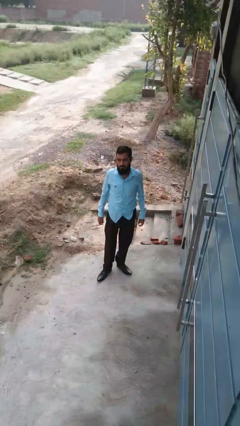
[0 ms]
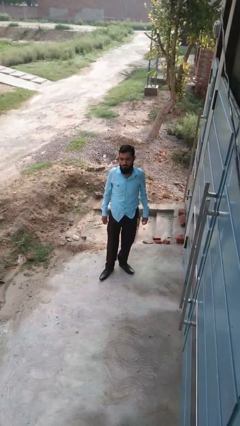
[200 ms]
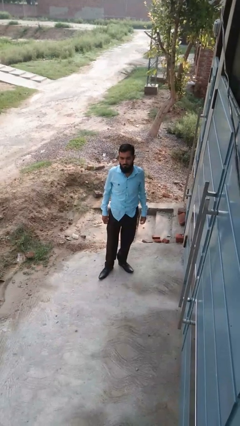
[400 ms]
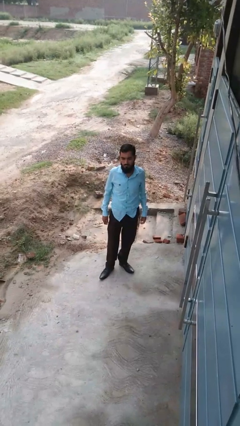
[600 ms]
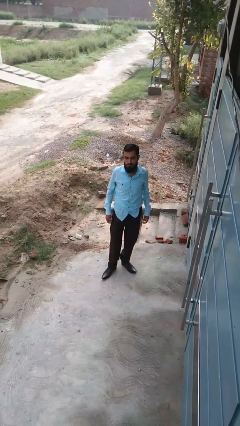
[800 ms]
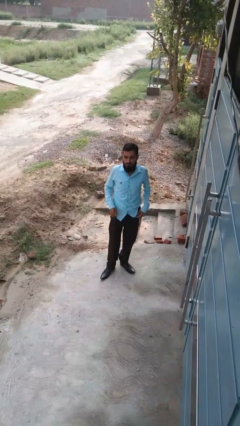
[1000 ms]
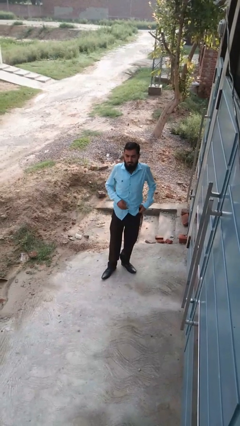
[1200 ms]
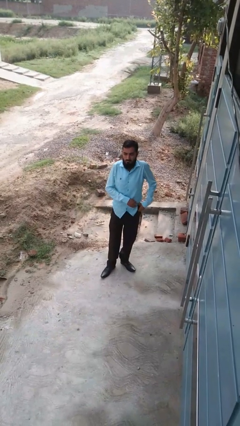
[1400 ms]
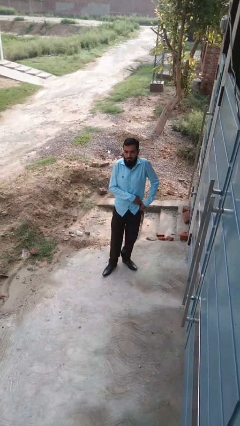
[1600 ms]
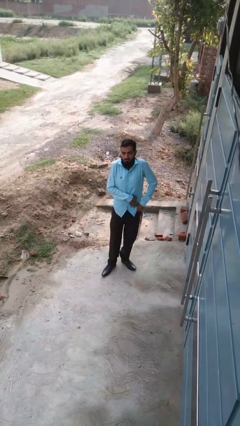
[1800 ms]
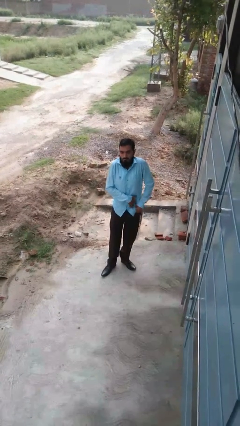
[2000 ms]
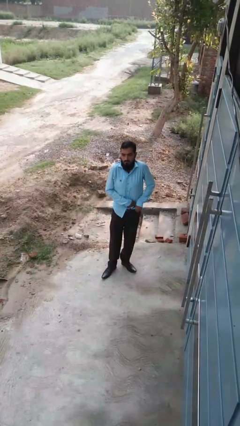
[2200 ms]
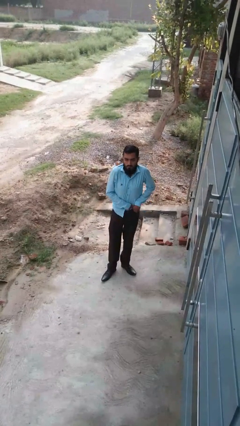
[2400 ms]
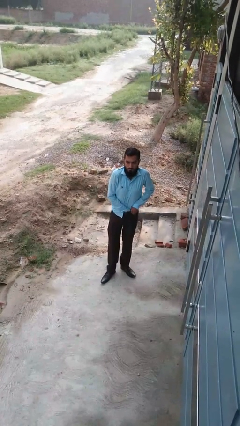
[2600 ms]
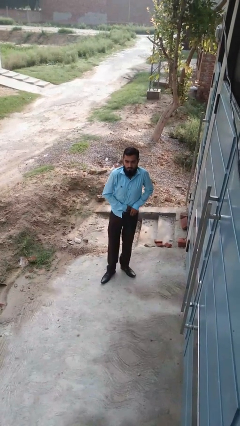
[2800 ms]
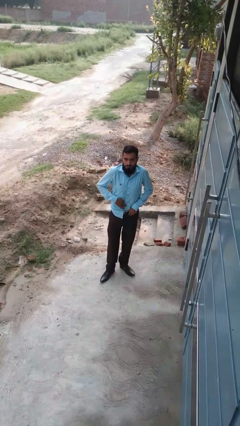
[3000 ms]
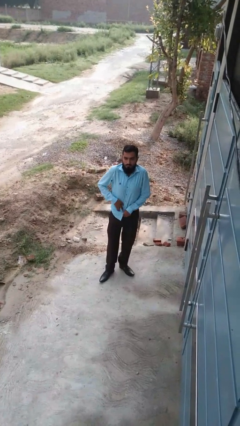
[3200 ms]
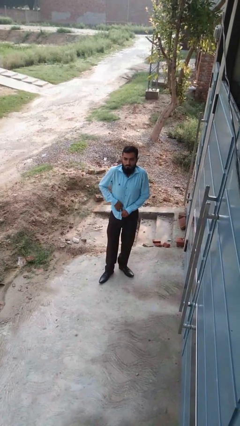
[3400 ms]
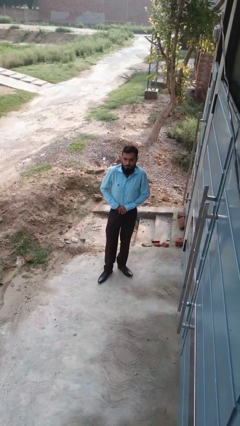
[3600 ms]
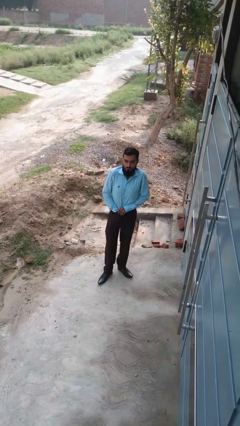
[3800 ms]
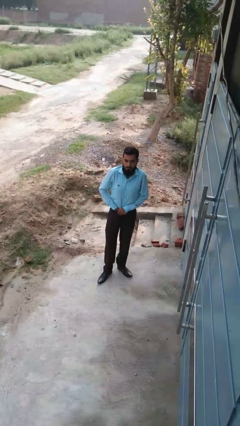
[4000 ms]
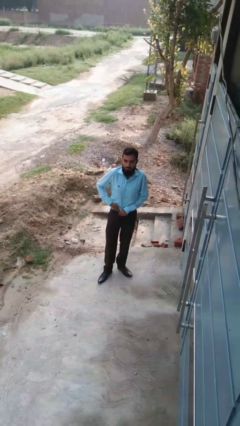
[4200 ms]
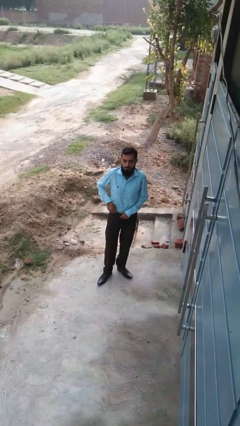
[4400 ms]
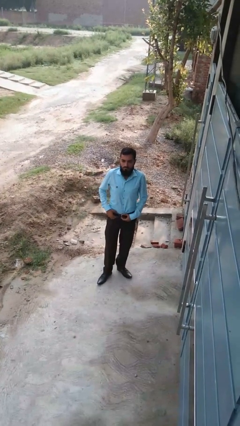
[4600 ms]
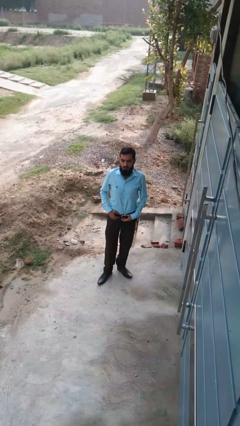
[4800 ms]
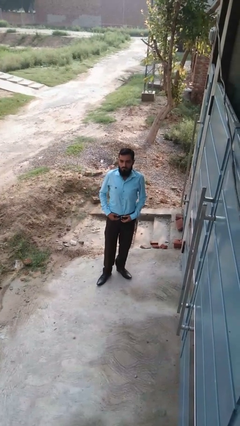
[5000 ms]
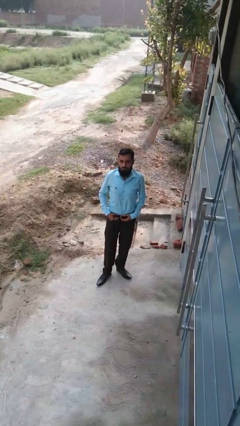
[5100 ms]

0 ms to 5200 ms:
person tucks in shirt

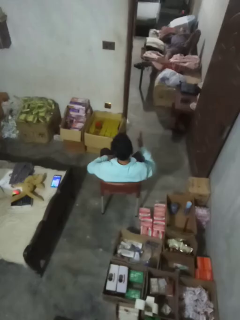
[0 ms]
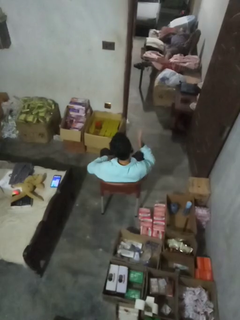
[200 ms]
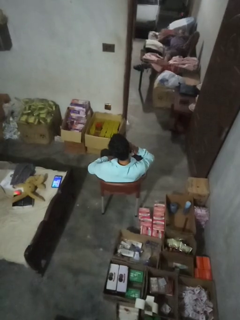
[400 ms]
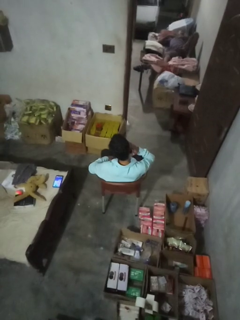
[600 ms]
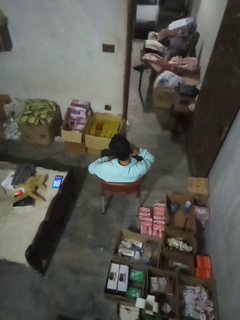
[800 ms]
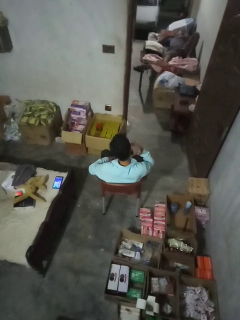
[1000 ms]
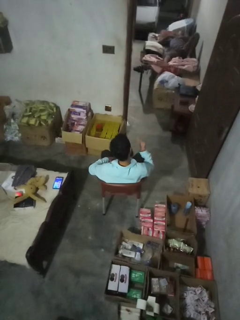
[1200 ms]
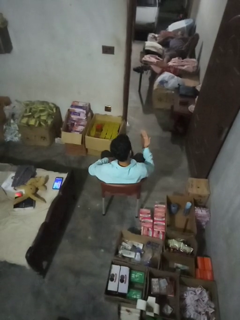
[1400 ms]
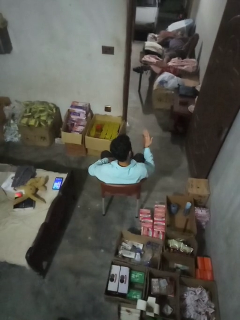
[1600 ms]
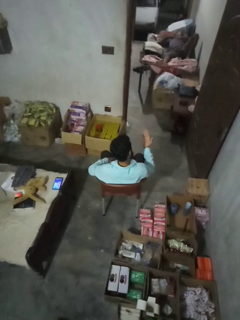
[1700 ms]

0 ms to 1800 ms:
person swats bug

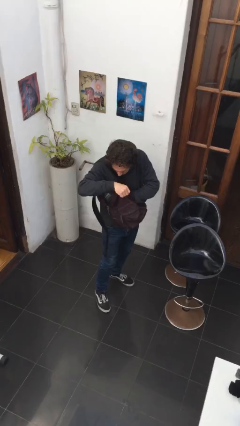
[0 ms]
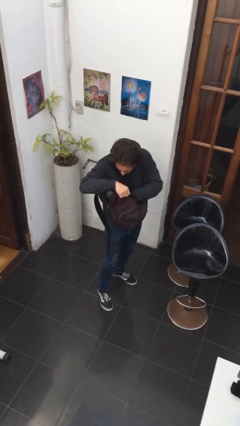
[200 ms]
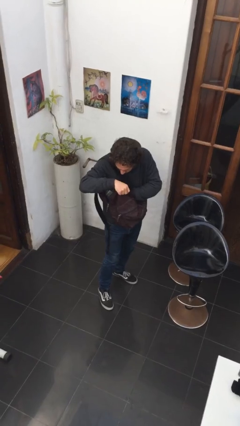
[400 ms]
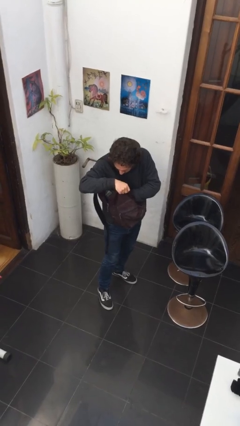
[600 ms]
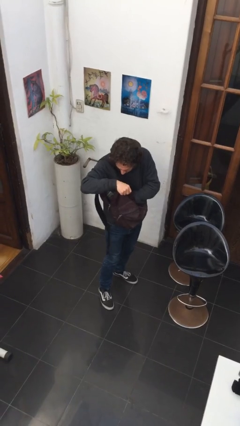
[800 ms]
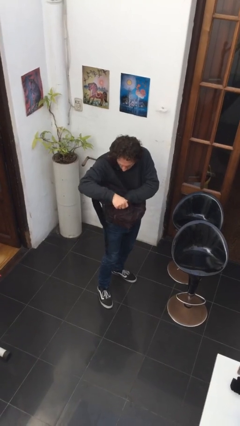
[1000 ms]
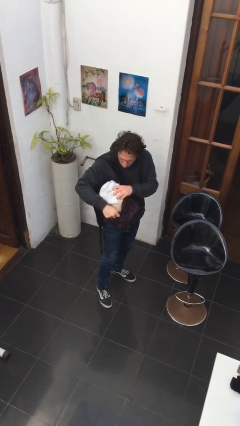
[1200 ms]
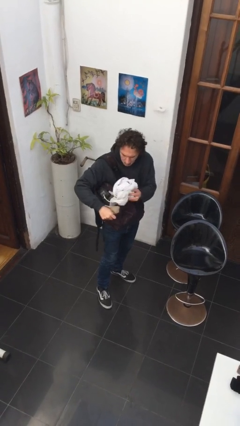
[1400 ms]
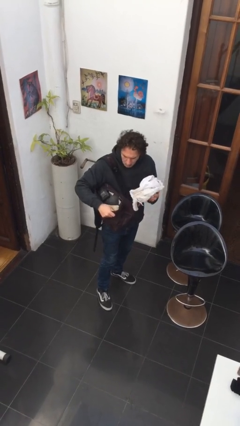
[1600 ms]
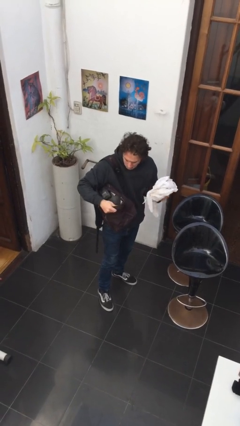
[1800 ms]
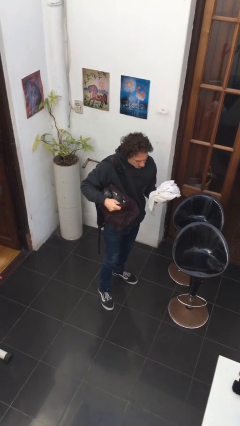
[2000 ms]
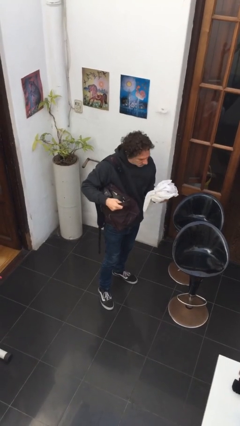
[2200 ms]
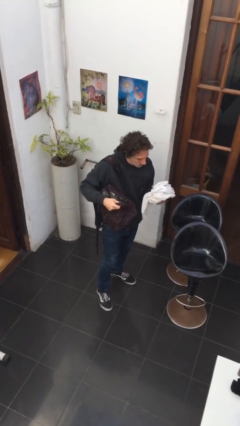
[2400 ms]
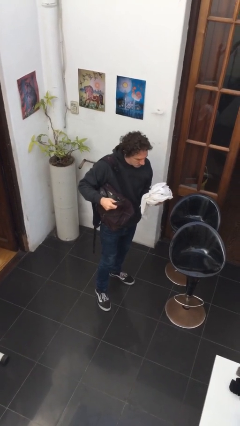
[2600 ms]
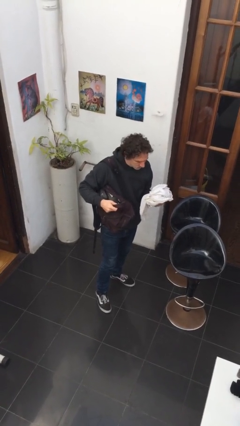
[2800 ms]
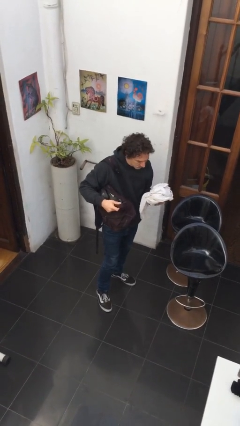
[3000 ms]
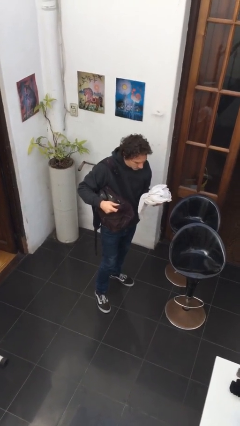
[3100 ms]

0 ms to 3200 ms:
person takes object from backpack

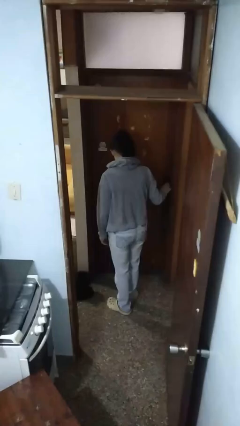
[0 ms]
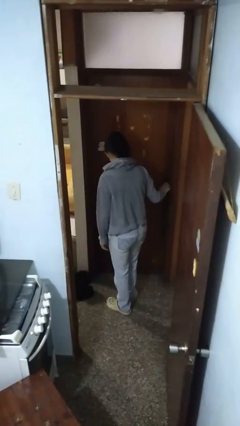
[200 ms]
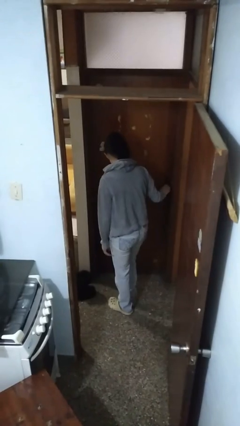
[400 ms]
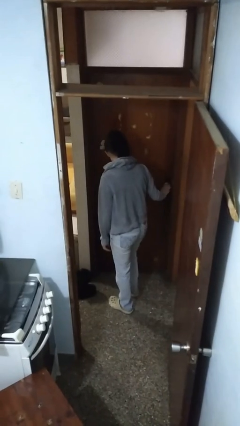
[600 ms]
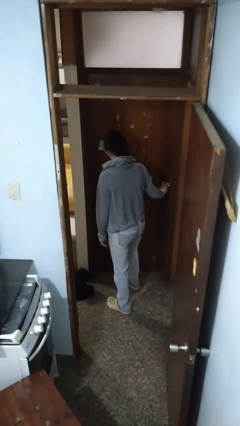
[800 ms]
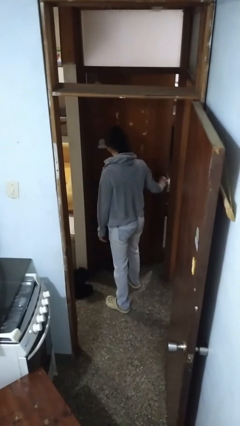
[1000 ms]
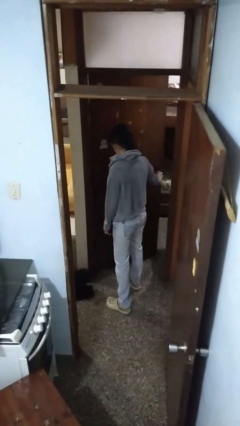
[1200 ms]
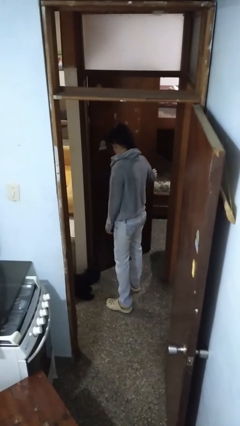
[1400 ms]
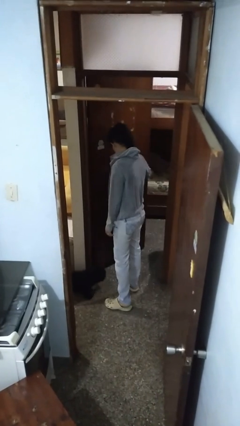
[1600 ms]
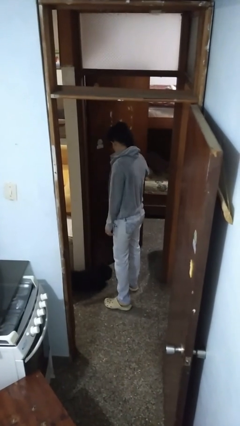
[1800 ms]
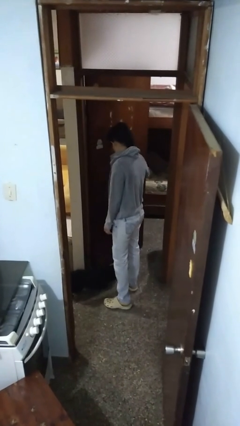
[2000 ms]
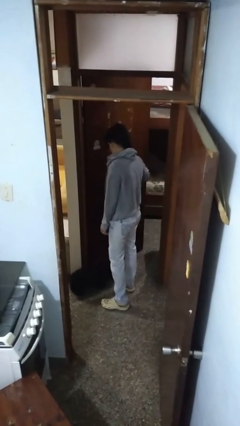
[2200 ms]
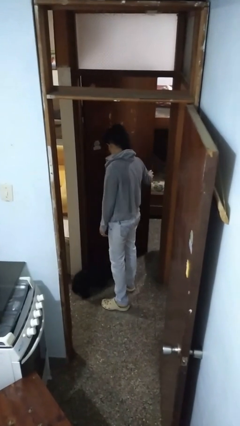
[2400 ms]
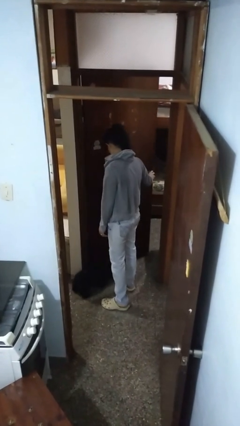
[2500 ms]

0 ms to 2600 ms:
person opens facility door

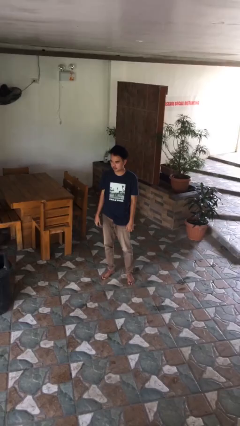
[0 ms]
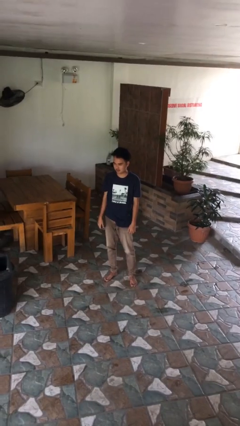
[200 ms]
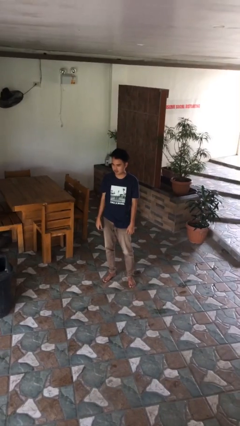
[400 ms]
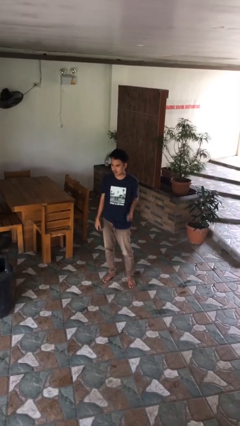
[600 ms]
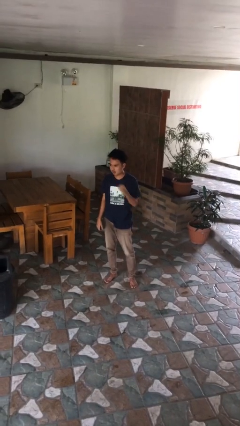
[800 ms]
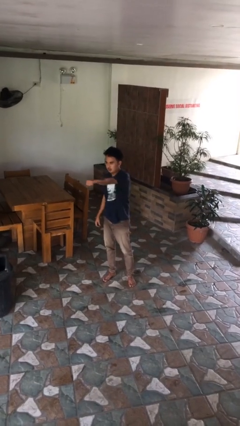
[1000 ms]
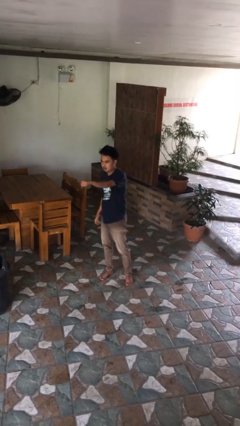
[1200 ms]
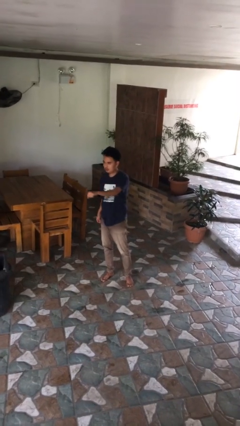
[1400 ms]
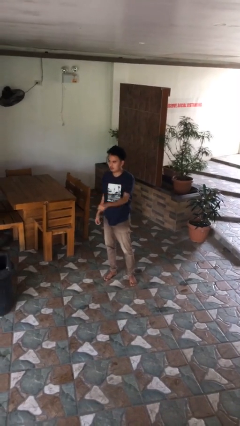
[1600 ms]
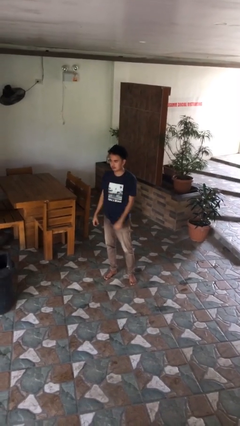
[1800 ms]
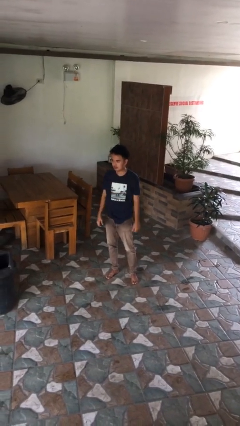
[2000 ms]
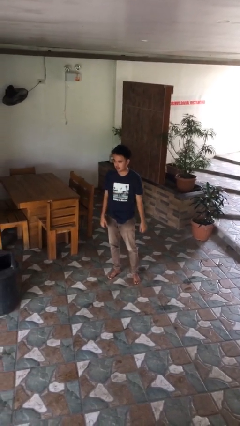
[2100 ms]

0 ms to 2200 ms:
person punches

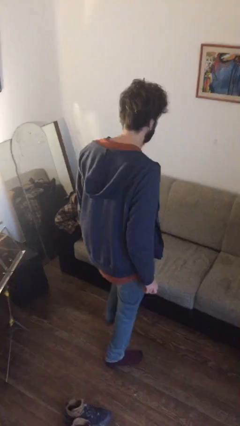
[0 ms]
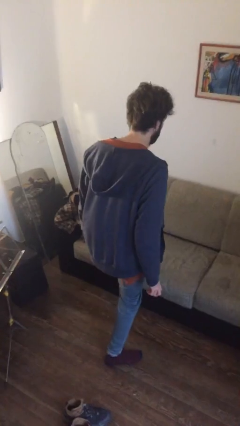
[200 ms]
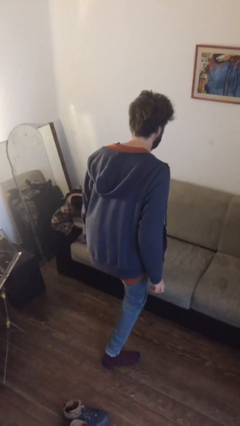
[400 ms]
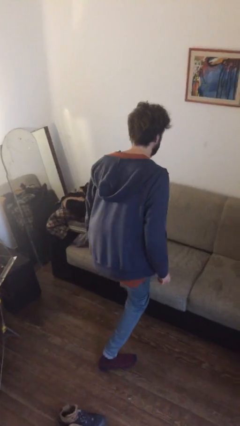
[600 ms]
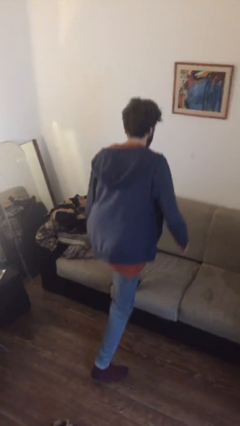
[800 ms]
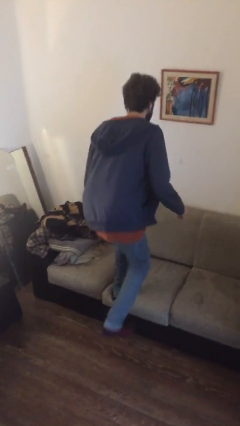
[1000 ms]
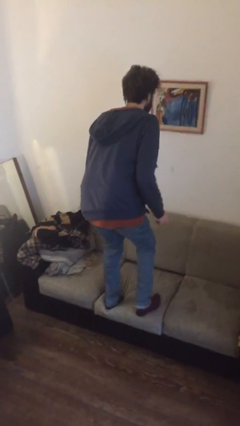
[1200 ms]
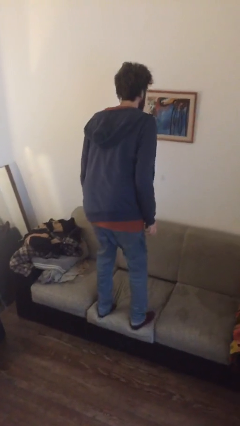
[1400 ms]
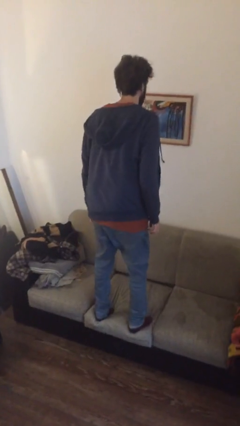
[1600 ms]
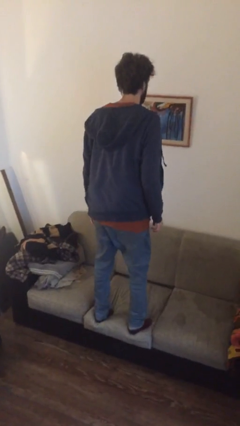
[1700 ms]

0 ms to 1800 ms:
person climbs on couch

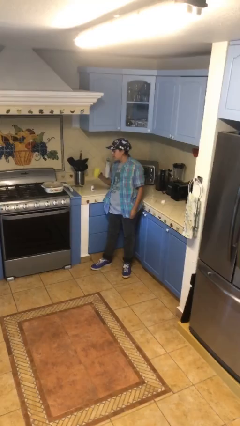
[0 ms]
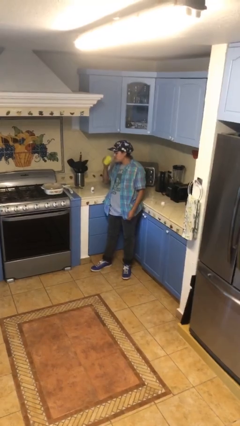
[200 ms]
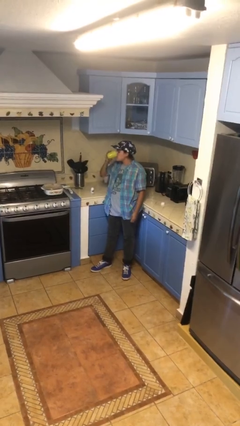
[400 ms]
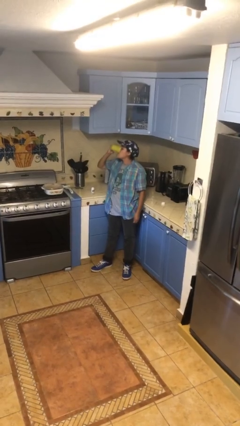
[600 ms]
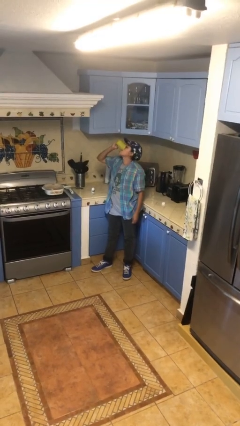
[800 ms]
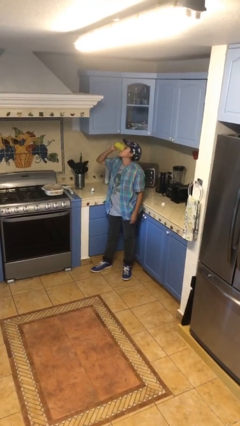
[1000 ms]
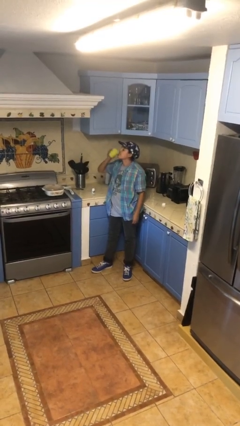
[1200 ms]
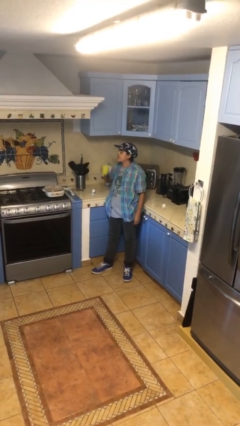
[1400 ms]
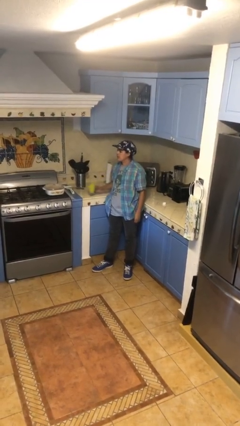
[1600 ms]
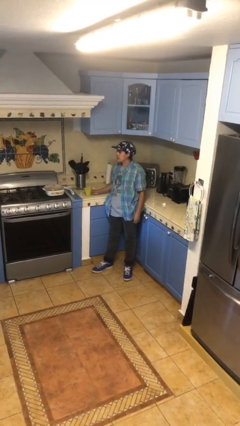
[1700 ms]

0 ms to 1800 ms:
person drinks from cup
